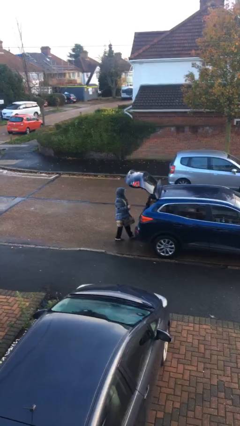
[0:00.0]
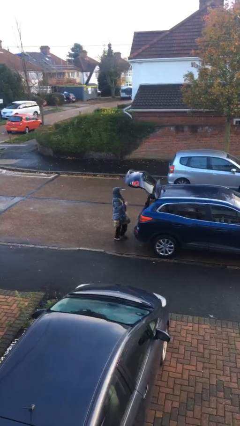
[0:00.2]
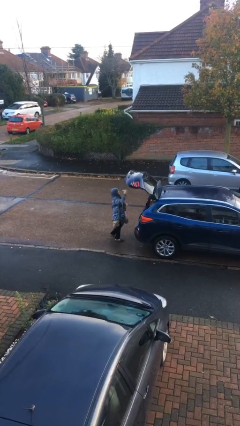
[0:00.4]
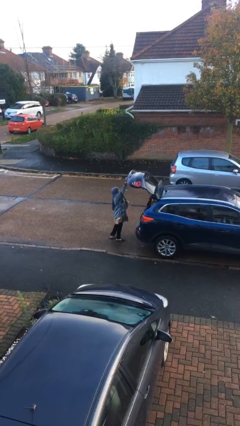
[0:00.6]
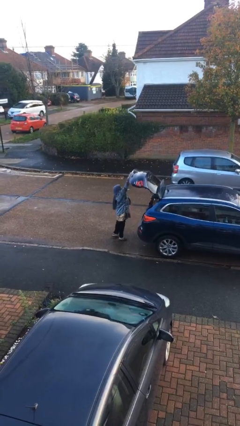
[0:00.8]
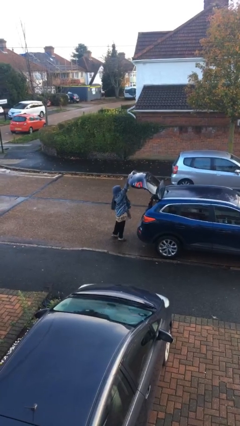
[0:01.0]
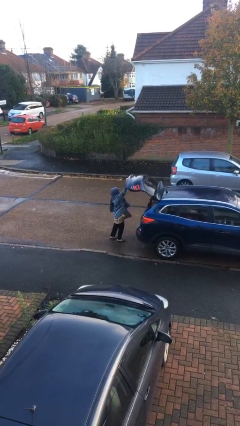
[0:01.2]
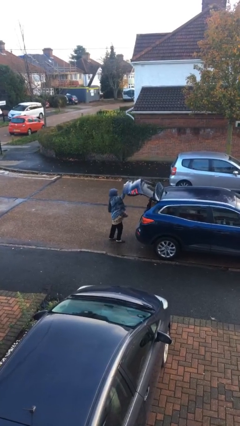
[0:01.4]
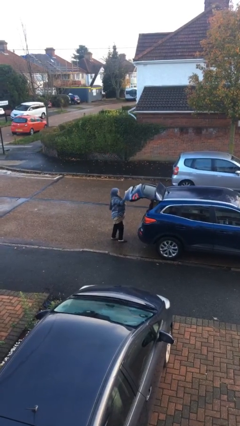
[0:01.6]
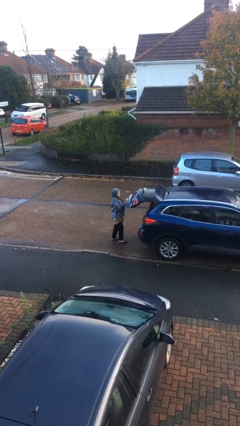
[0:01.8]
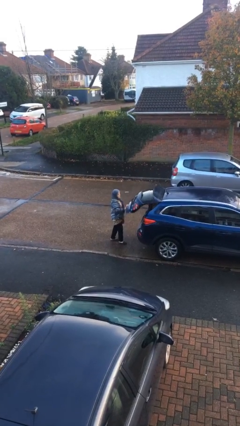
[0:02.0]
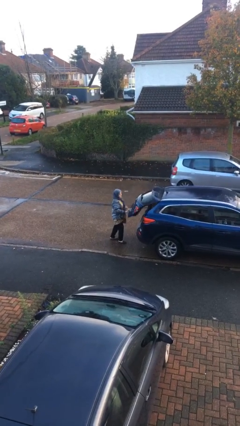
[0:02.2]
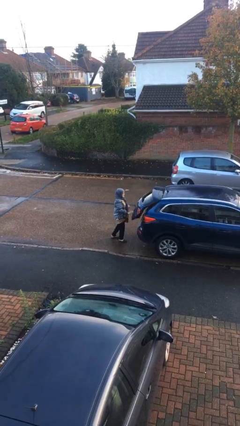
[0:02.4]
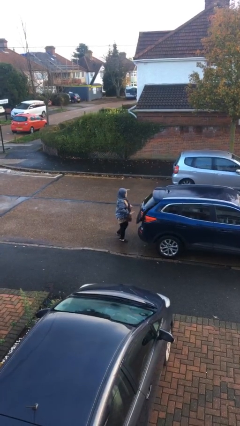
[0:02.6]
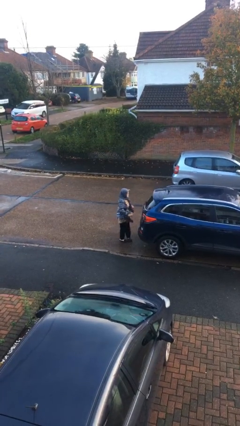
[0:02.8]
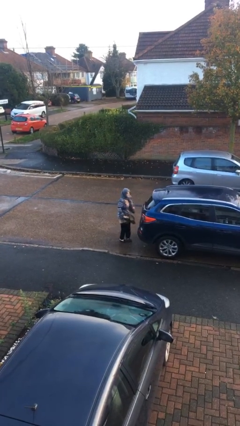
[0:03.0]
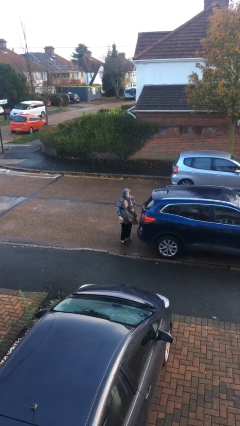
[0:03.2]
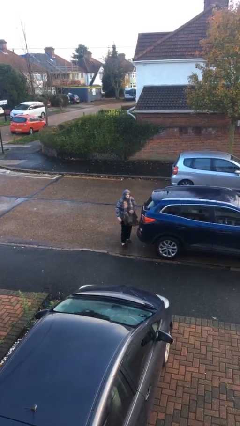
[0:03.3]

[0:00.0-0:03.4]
person closes car trunk

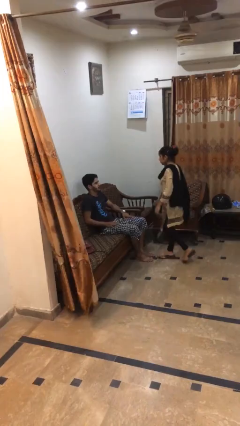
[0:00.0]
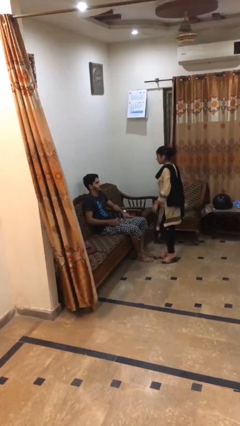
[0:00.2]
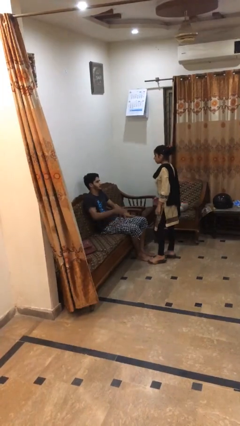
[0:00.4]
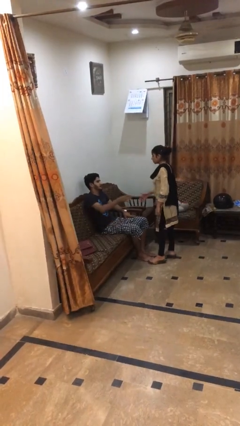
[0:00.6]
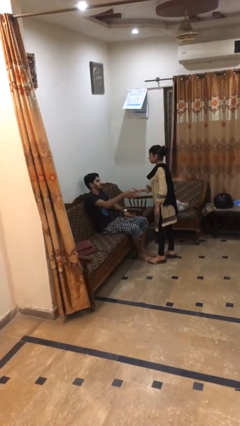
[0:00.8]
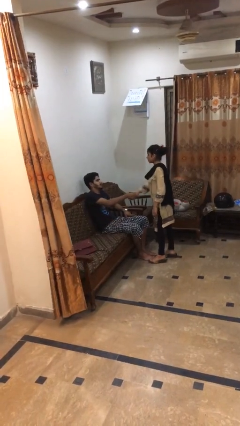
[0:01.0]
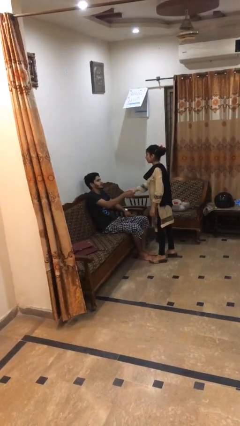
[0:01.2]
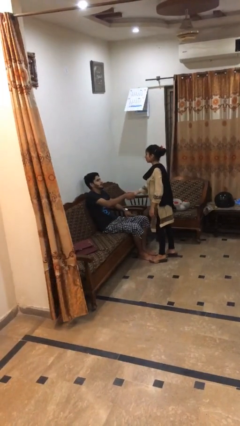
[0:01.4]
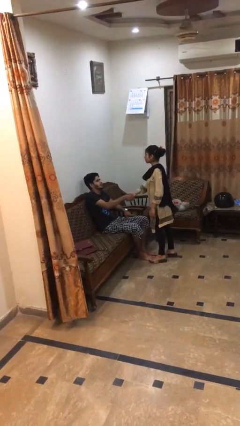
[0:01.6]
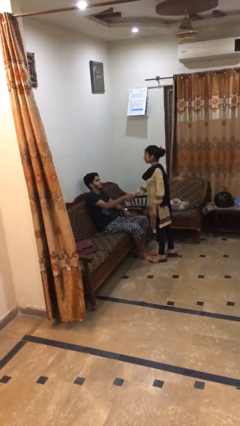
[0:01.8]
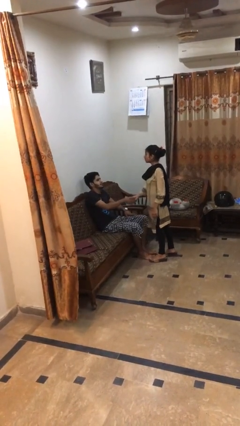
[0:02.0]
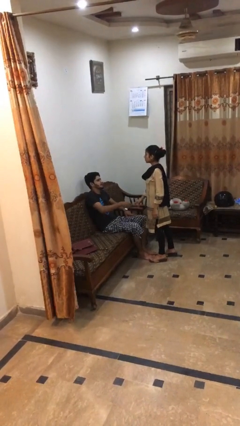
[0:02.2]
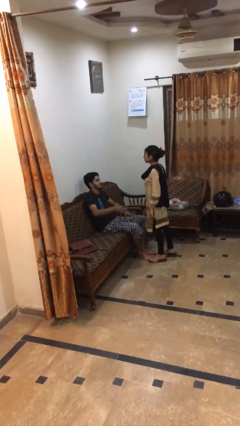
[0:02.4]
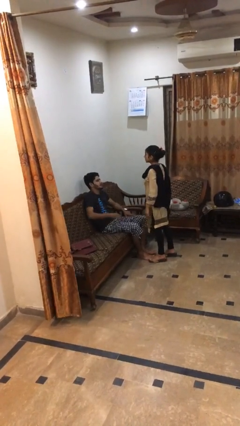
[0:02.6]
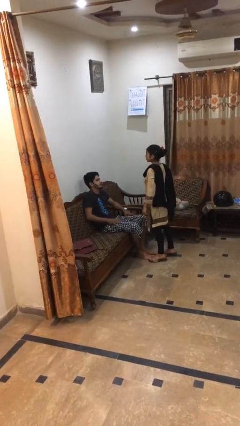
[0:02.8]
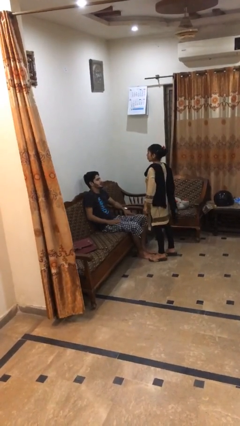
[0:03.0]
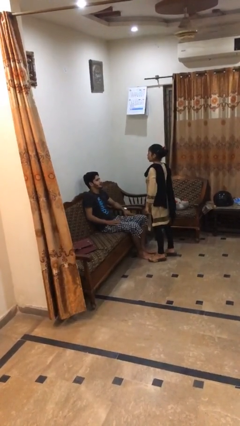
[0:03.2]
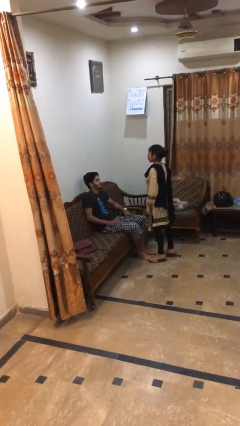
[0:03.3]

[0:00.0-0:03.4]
person shakes hand

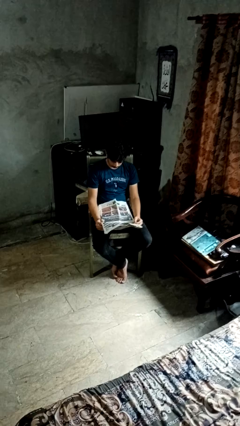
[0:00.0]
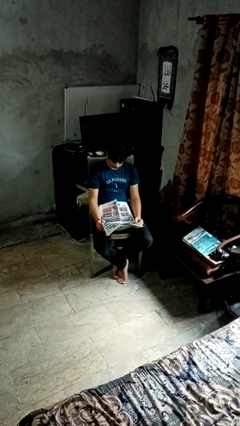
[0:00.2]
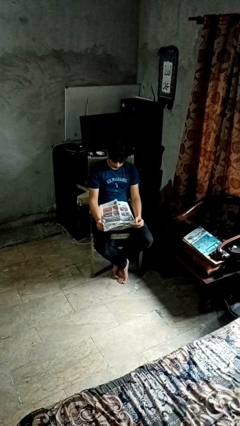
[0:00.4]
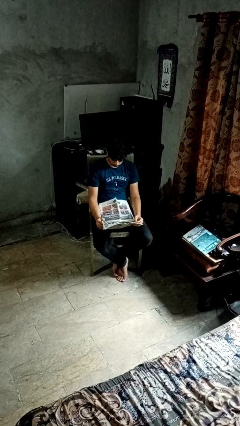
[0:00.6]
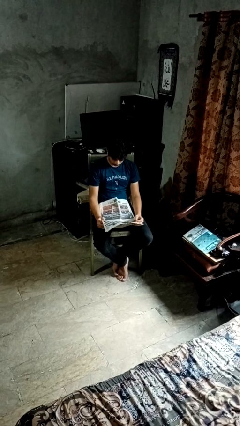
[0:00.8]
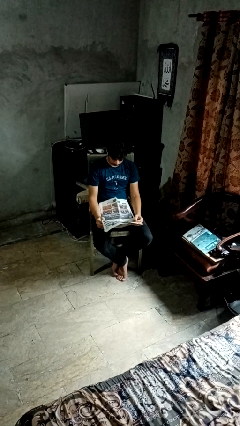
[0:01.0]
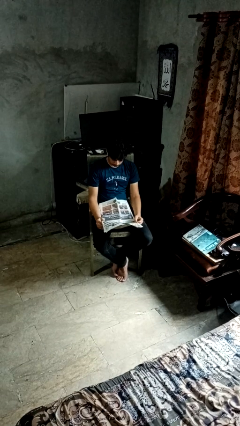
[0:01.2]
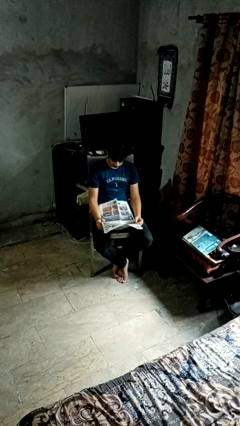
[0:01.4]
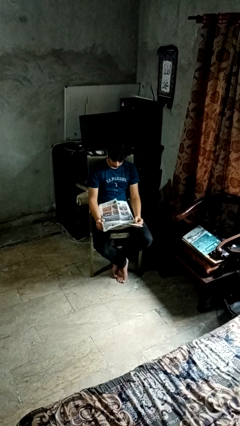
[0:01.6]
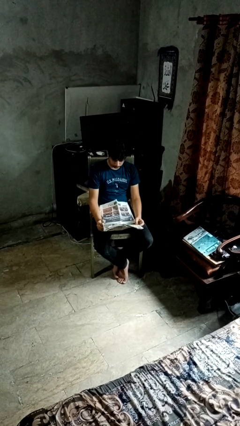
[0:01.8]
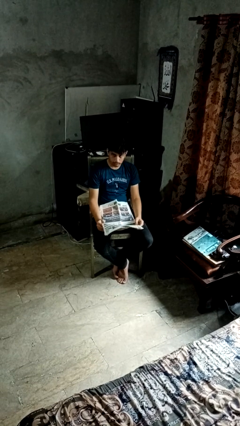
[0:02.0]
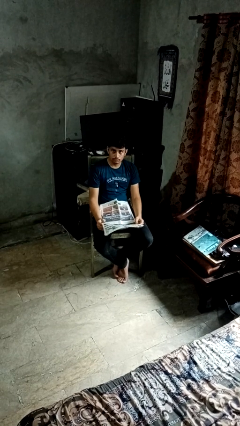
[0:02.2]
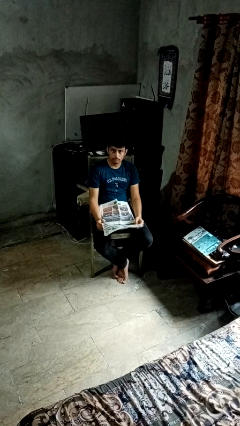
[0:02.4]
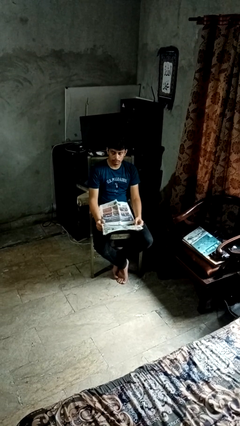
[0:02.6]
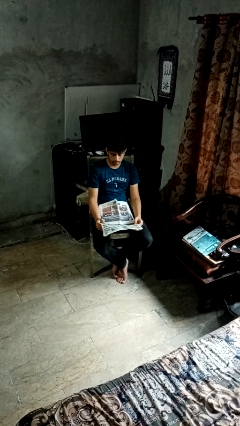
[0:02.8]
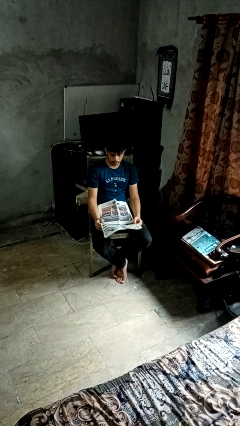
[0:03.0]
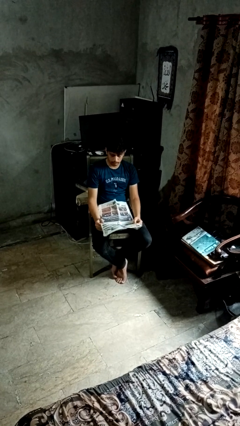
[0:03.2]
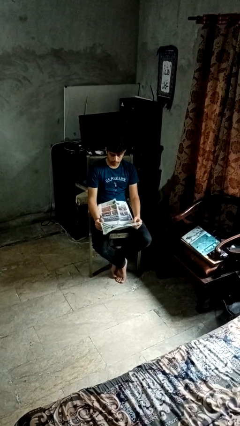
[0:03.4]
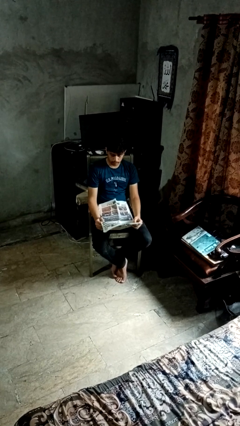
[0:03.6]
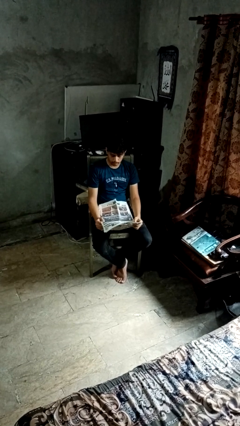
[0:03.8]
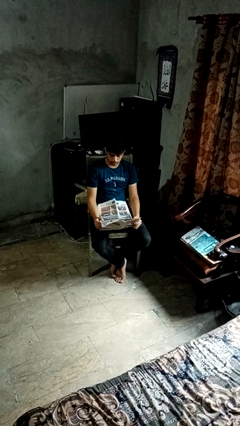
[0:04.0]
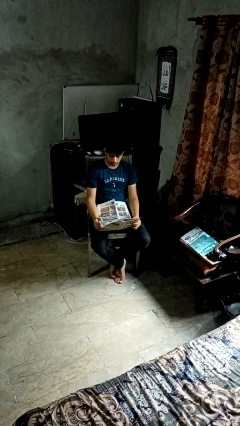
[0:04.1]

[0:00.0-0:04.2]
person reads newspaper

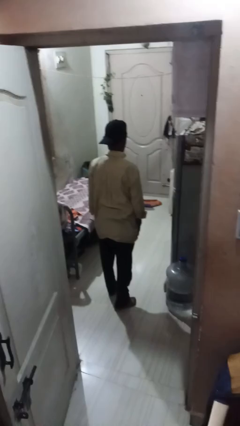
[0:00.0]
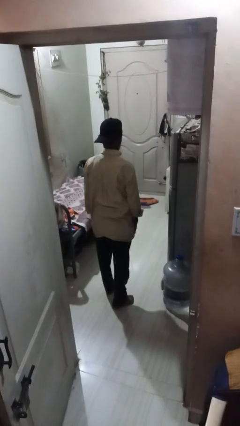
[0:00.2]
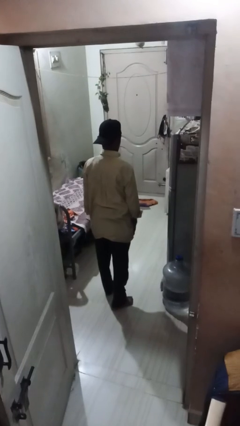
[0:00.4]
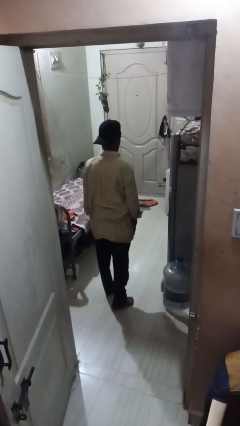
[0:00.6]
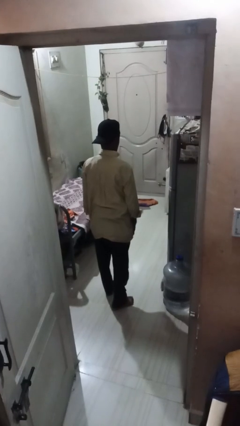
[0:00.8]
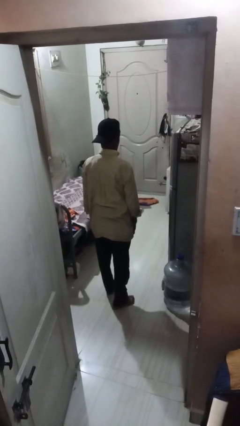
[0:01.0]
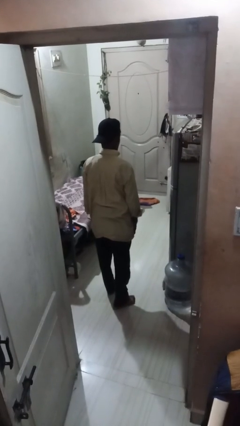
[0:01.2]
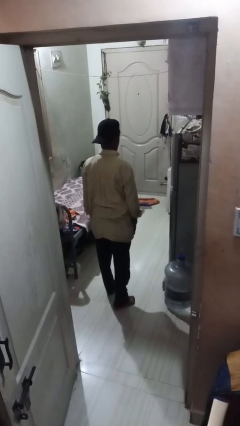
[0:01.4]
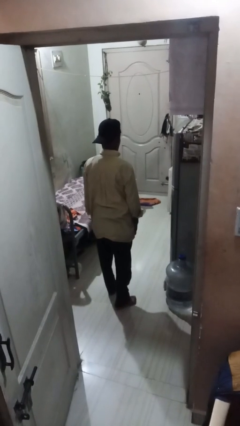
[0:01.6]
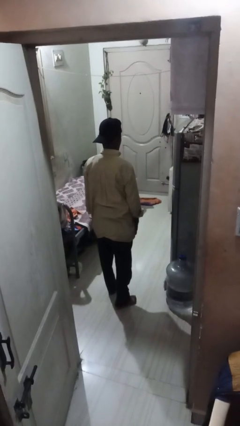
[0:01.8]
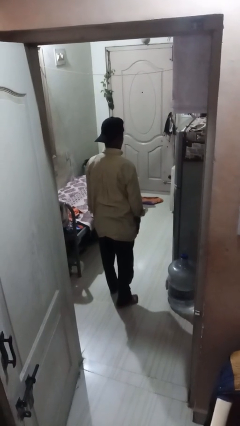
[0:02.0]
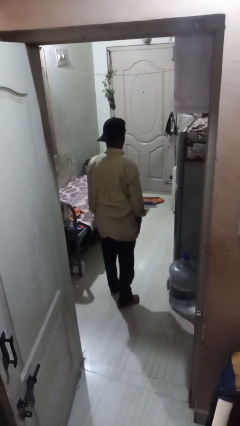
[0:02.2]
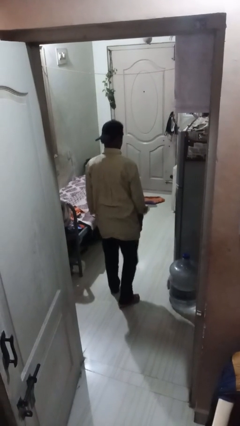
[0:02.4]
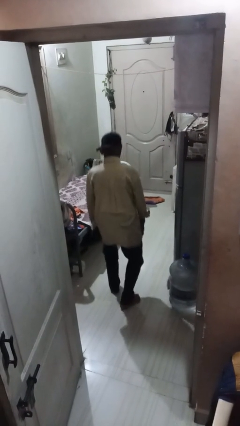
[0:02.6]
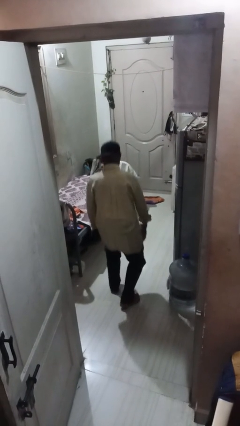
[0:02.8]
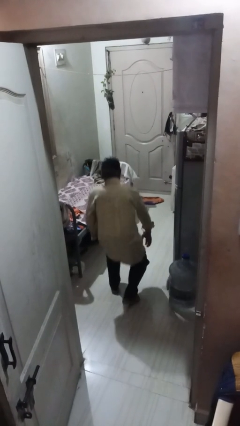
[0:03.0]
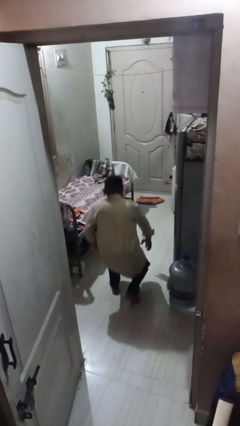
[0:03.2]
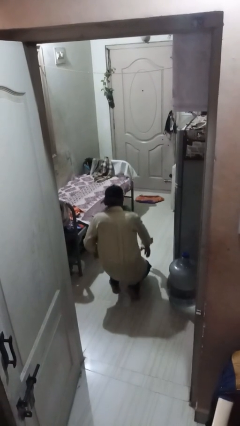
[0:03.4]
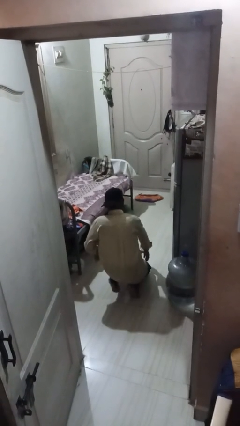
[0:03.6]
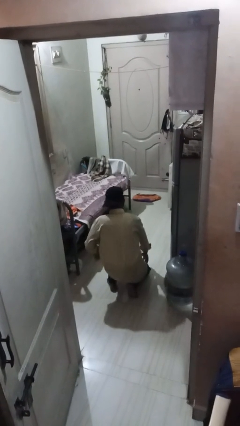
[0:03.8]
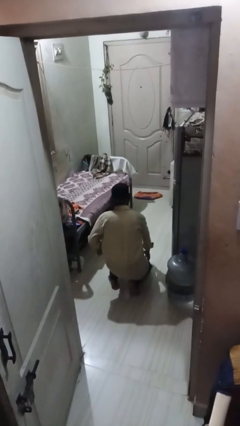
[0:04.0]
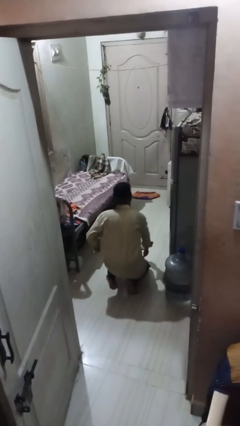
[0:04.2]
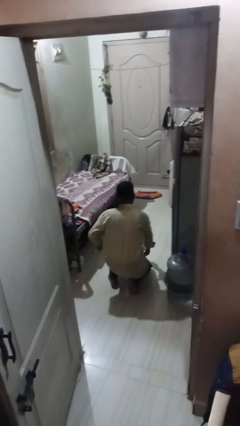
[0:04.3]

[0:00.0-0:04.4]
person kneels

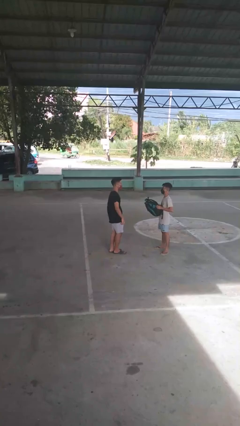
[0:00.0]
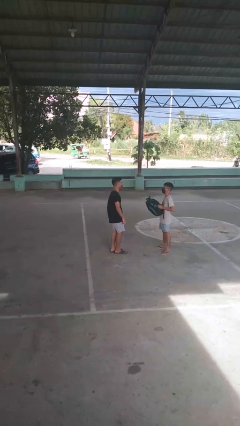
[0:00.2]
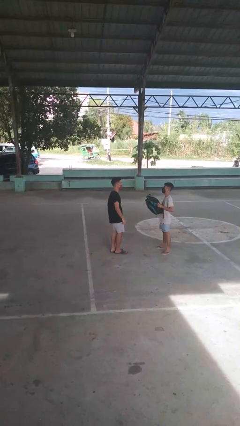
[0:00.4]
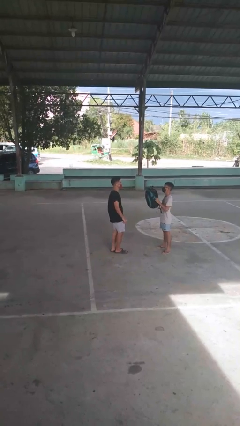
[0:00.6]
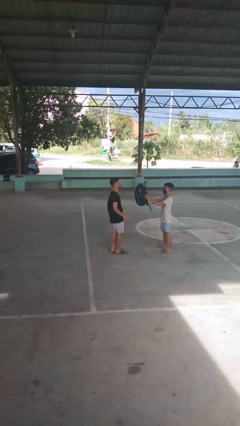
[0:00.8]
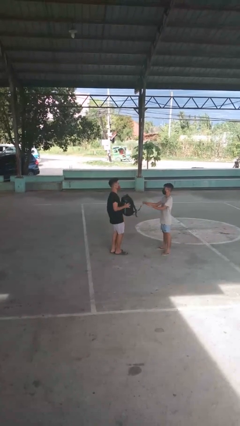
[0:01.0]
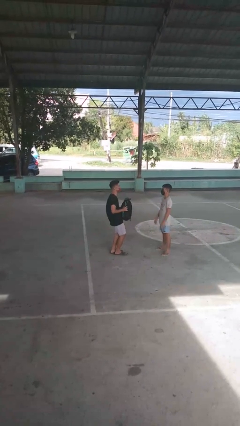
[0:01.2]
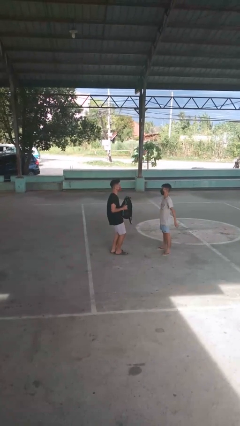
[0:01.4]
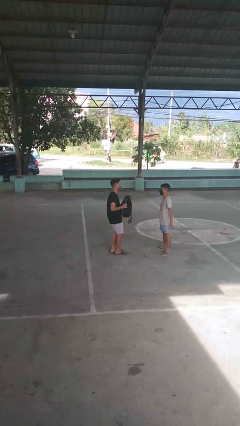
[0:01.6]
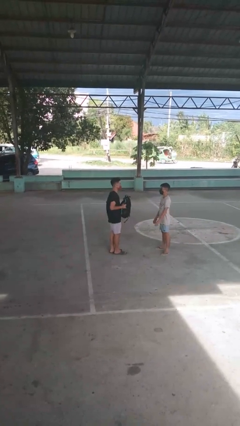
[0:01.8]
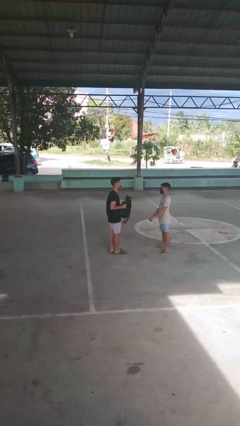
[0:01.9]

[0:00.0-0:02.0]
person catches object from person
